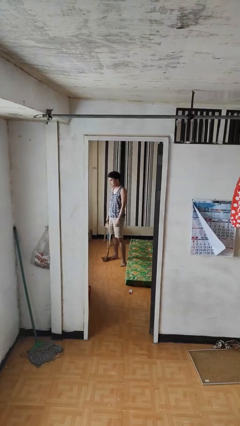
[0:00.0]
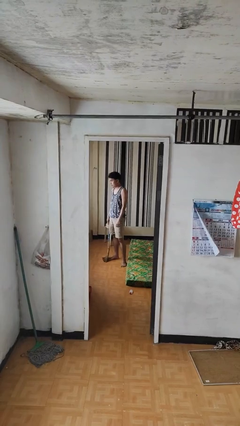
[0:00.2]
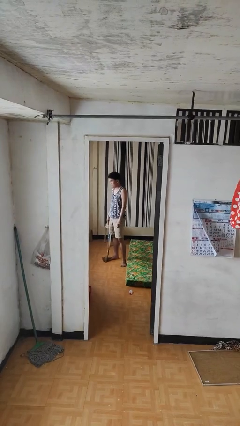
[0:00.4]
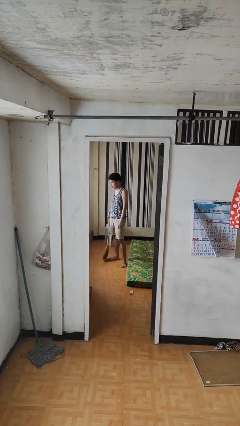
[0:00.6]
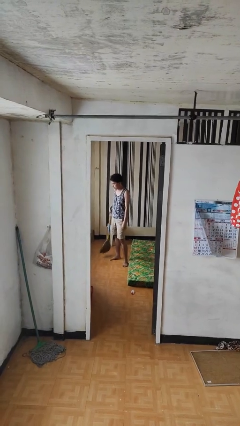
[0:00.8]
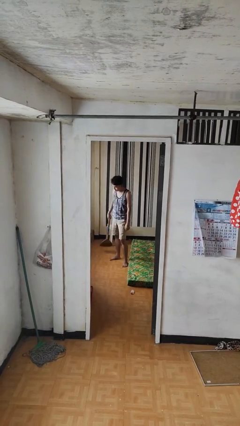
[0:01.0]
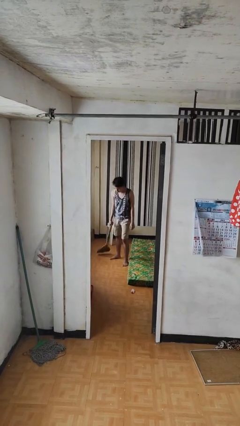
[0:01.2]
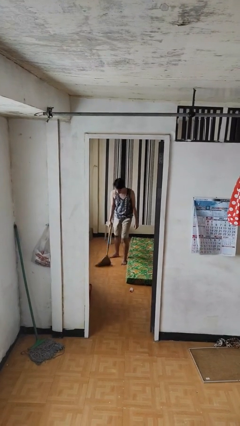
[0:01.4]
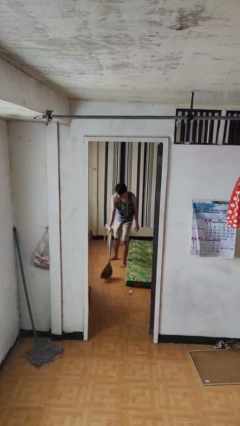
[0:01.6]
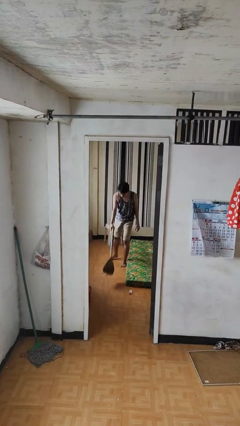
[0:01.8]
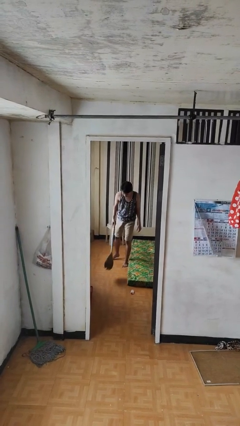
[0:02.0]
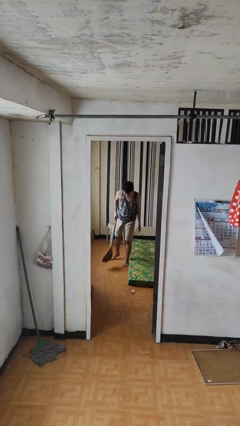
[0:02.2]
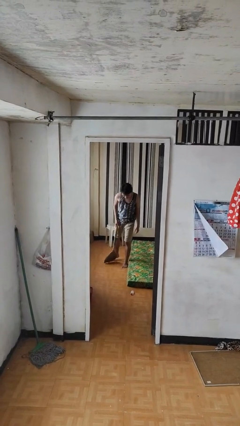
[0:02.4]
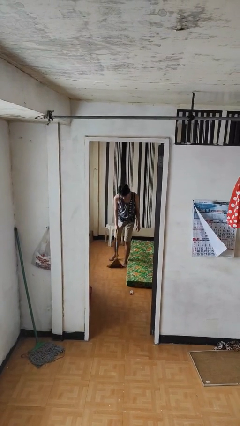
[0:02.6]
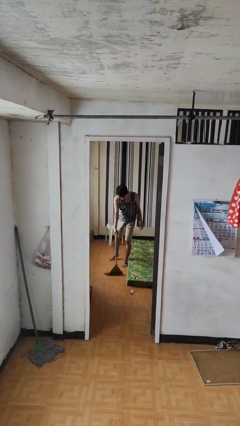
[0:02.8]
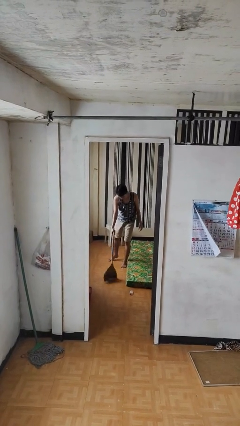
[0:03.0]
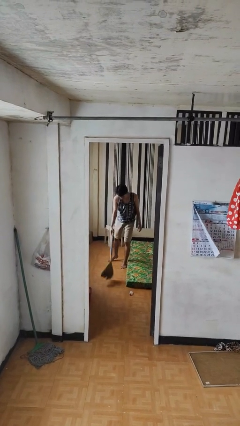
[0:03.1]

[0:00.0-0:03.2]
person sweeps floor

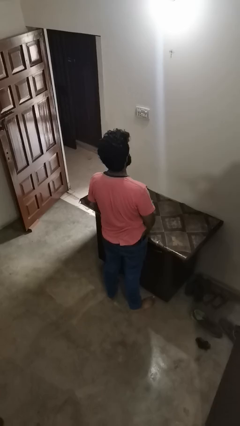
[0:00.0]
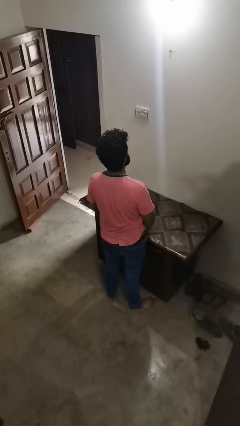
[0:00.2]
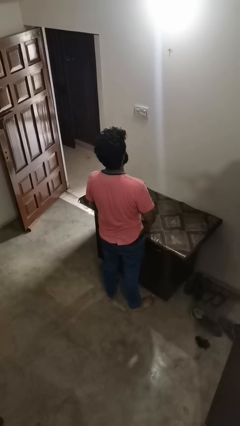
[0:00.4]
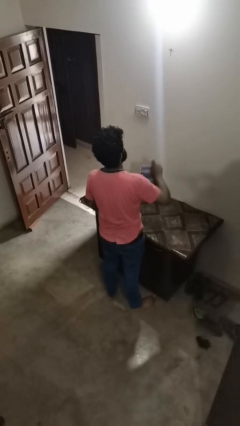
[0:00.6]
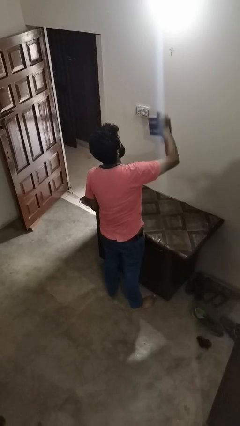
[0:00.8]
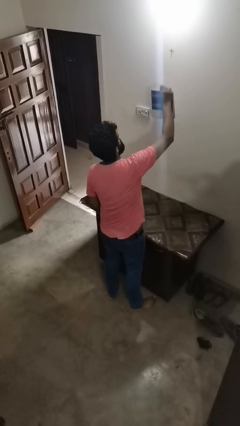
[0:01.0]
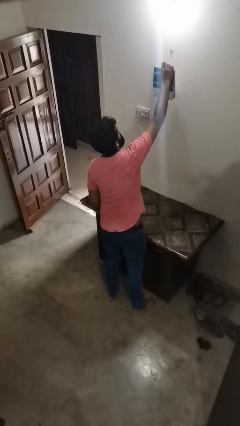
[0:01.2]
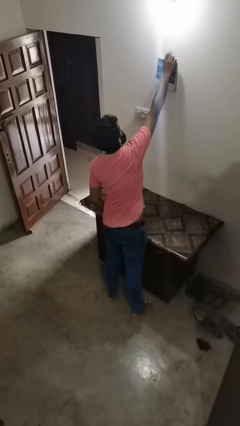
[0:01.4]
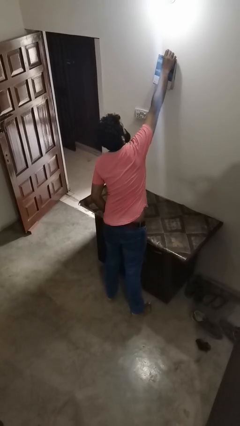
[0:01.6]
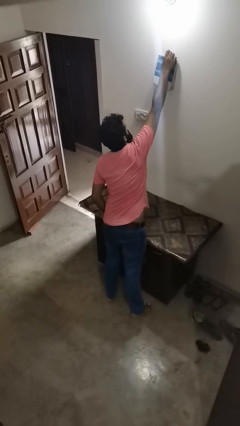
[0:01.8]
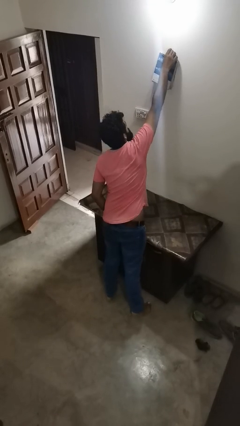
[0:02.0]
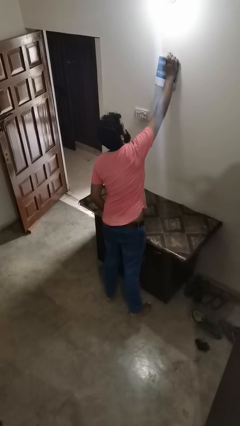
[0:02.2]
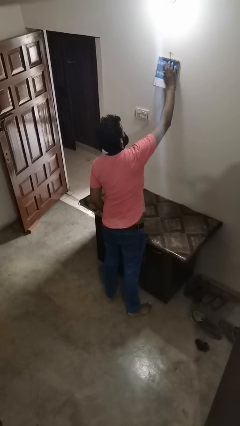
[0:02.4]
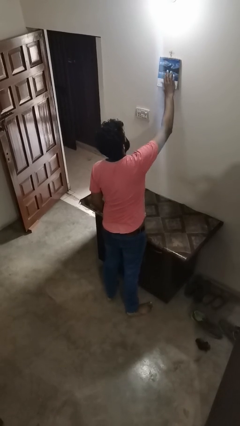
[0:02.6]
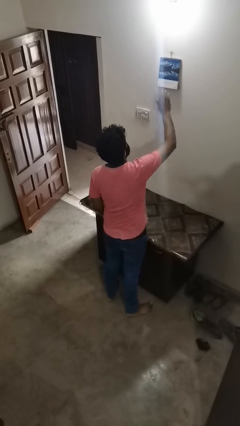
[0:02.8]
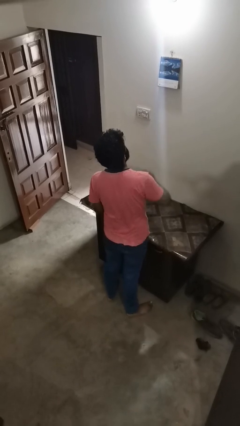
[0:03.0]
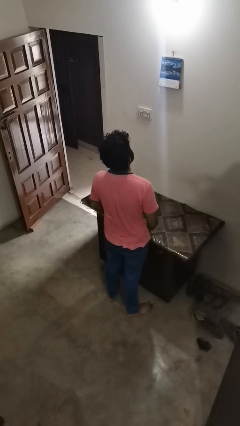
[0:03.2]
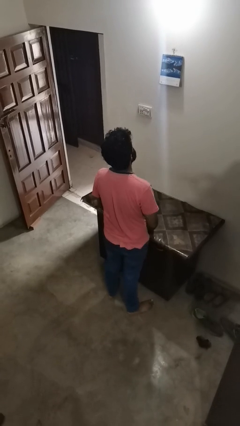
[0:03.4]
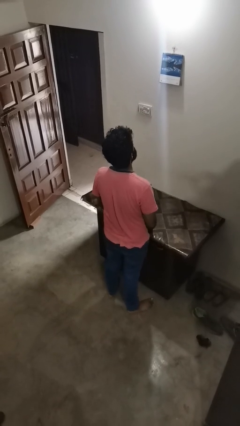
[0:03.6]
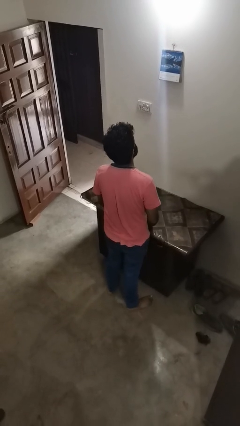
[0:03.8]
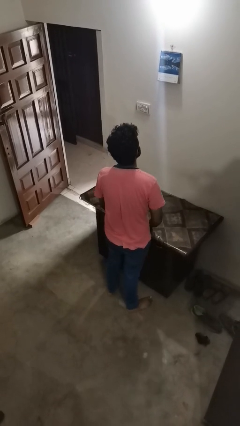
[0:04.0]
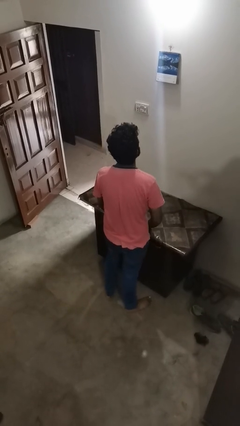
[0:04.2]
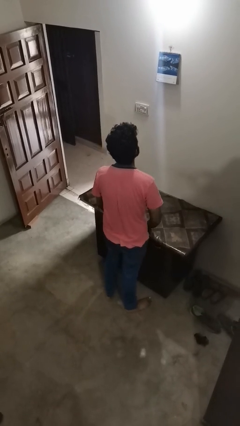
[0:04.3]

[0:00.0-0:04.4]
person puts up picture frame

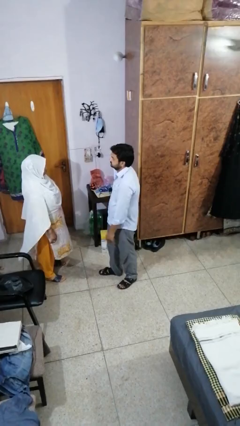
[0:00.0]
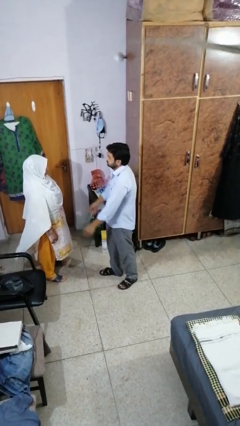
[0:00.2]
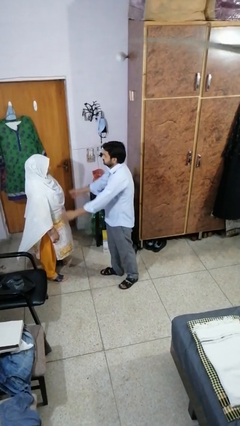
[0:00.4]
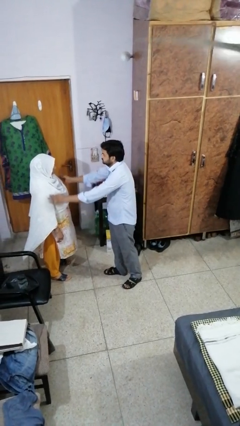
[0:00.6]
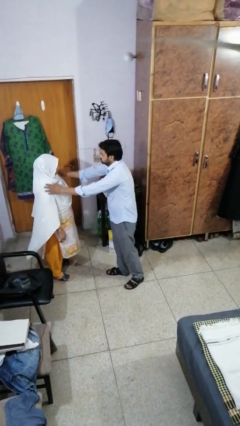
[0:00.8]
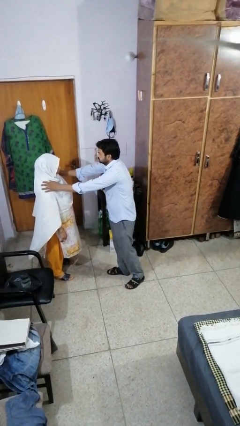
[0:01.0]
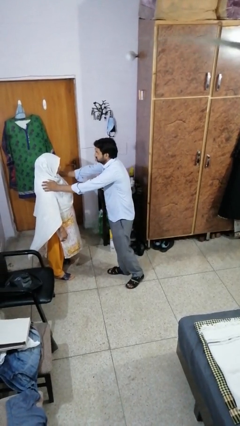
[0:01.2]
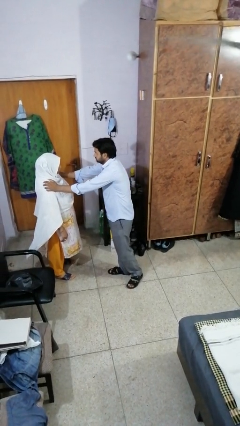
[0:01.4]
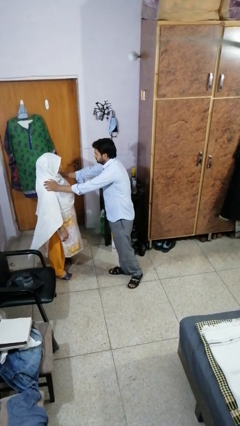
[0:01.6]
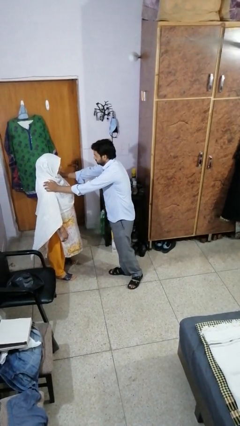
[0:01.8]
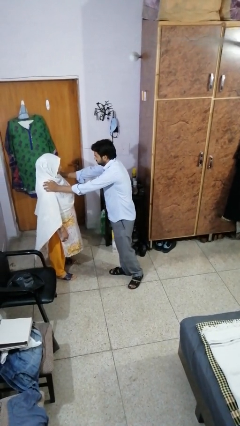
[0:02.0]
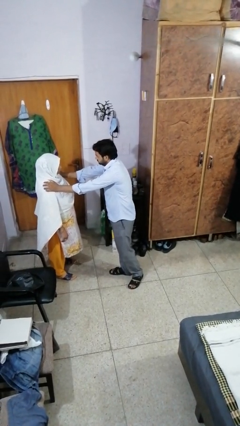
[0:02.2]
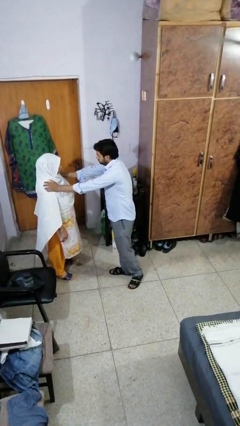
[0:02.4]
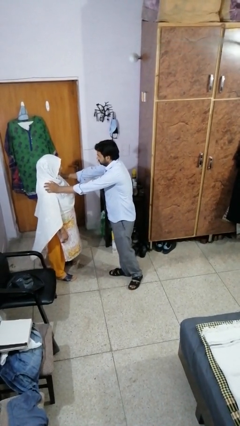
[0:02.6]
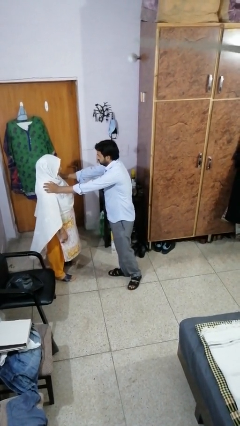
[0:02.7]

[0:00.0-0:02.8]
person pounds shoulders of person

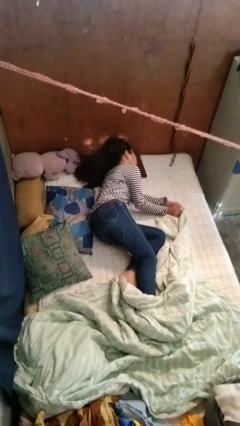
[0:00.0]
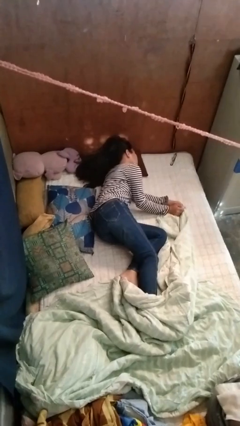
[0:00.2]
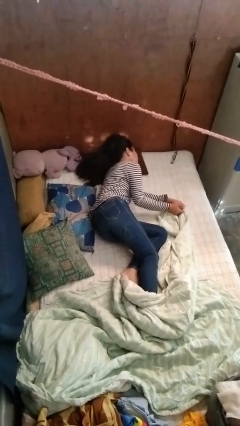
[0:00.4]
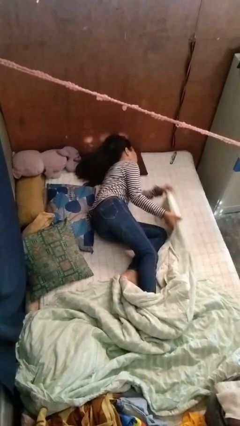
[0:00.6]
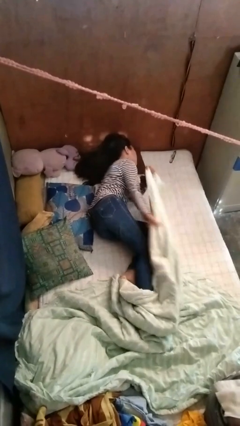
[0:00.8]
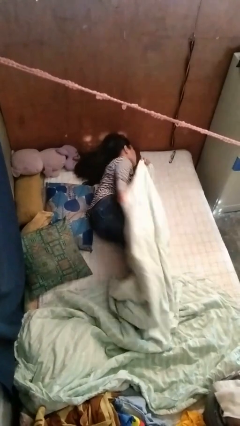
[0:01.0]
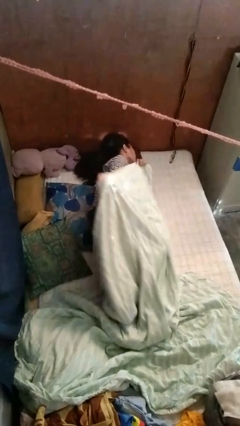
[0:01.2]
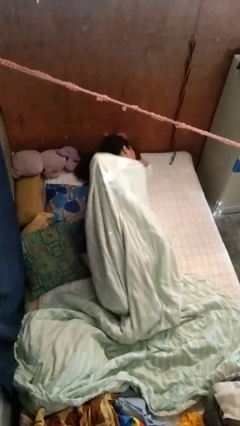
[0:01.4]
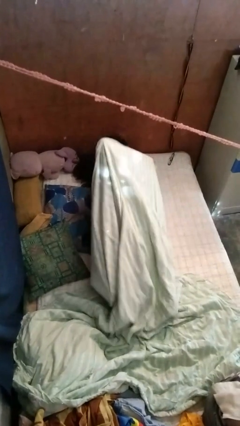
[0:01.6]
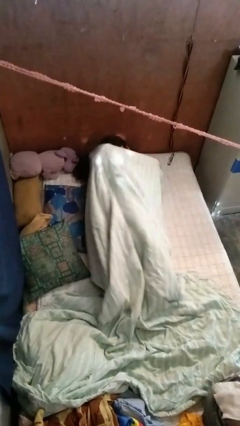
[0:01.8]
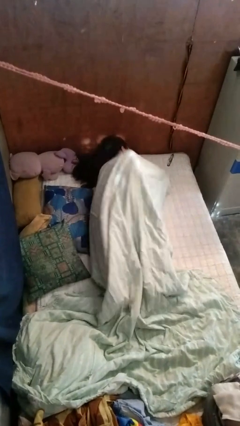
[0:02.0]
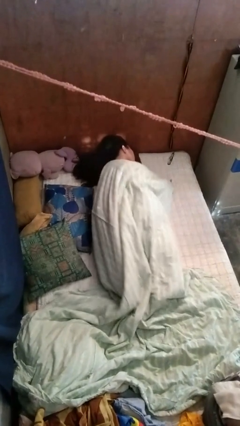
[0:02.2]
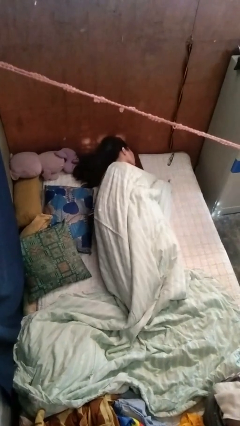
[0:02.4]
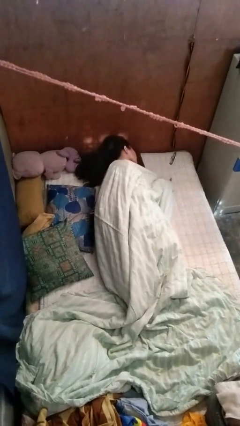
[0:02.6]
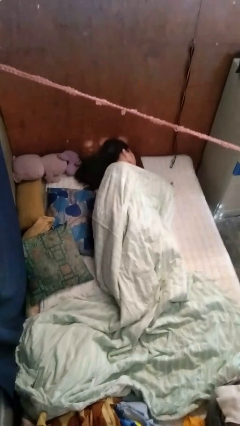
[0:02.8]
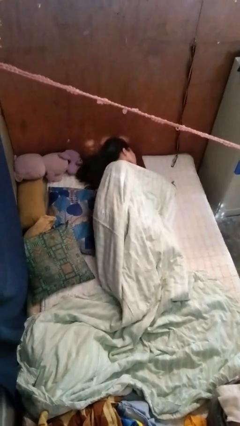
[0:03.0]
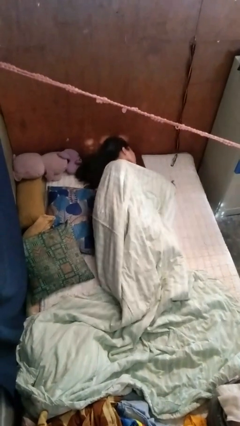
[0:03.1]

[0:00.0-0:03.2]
person covers with bedsheets

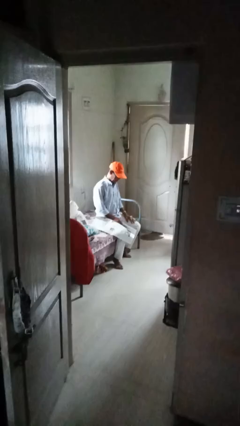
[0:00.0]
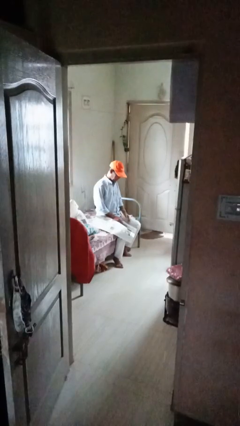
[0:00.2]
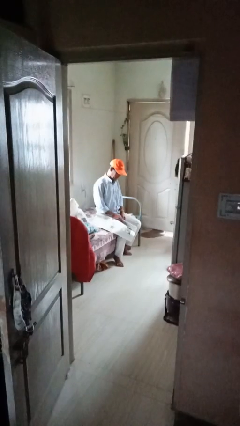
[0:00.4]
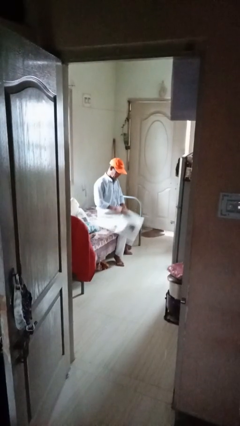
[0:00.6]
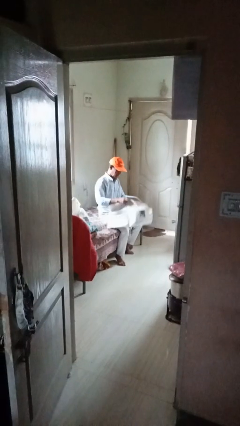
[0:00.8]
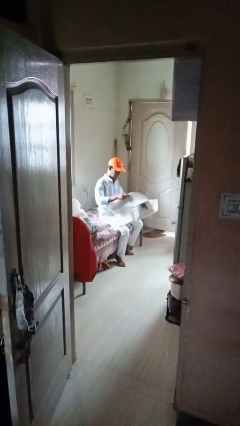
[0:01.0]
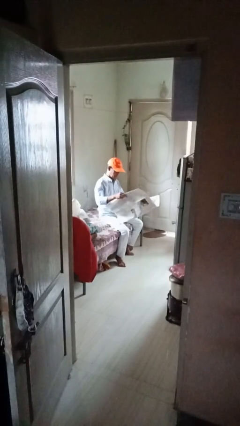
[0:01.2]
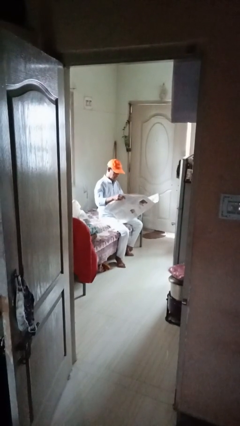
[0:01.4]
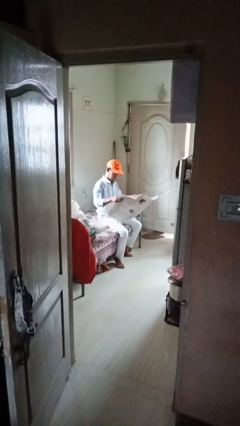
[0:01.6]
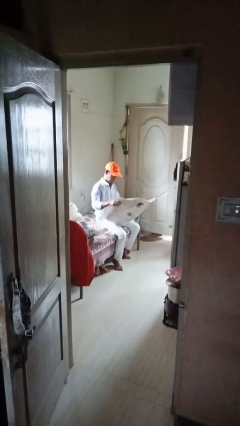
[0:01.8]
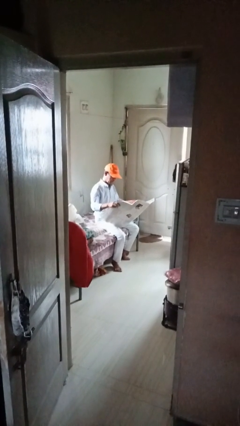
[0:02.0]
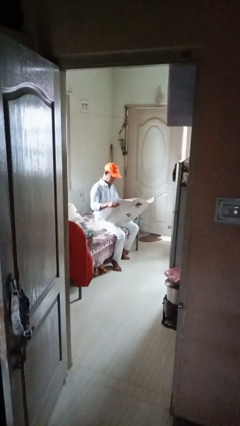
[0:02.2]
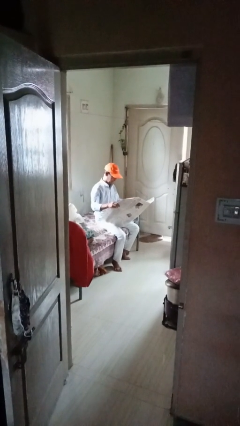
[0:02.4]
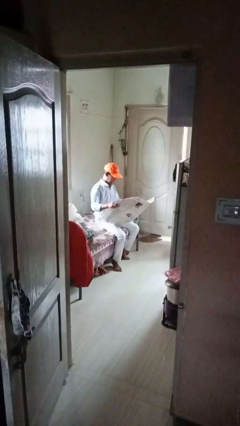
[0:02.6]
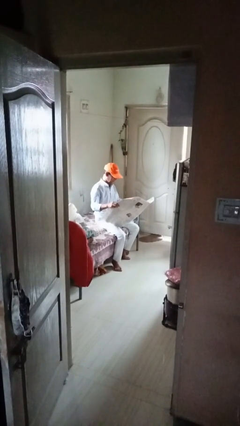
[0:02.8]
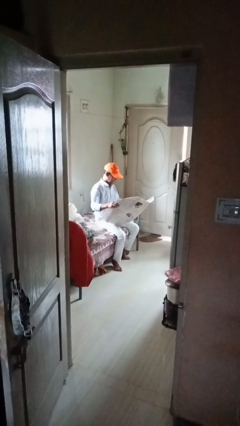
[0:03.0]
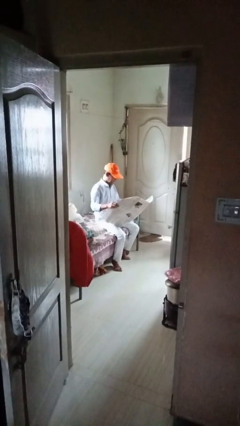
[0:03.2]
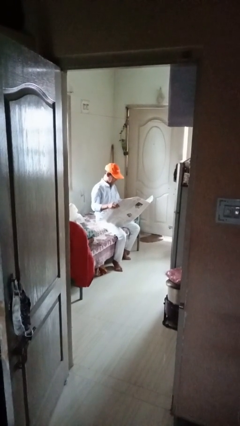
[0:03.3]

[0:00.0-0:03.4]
person reads newspaper

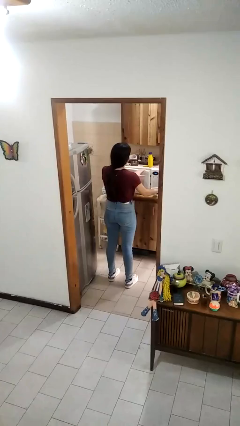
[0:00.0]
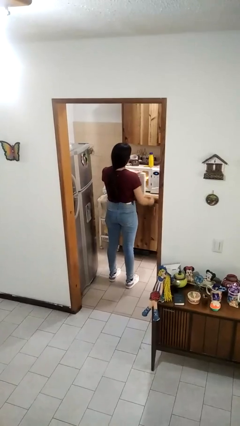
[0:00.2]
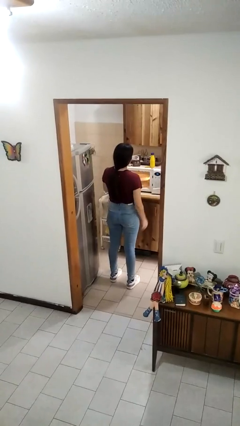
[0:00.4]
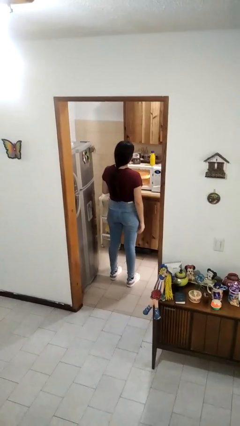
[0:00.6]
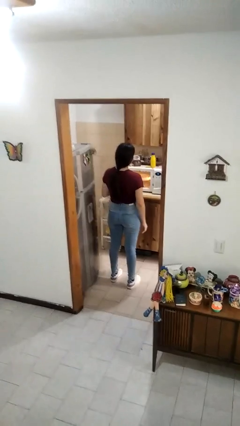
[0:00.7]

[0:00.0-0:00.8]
person opens microwave
